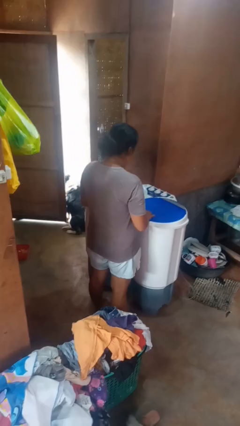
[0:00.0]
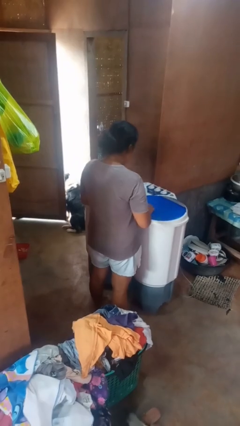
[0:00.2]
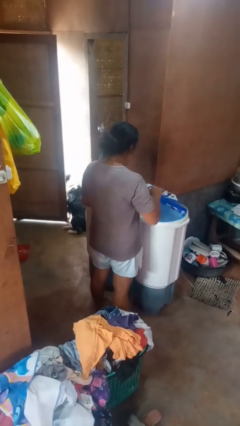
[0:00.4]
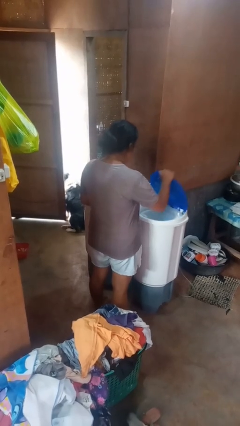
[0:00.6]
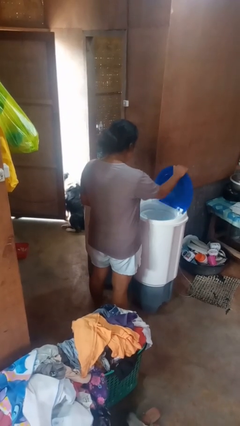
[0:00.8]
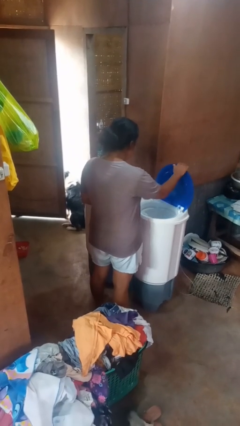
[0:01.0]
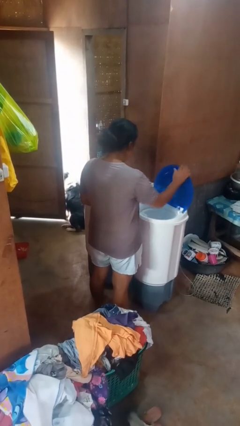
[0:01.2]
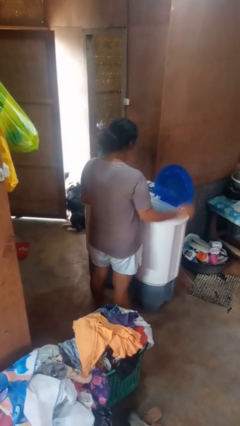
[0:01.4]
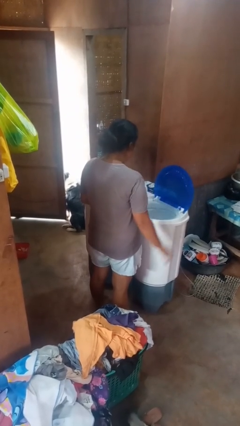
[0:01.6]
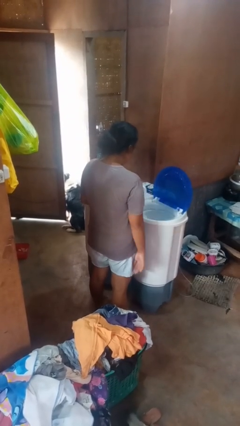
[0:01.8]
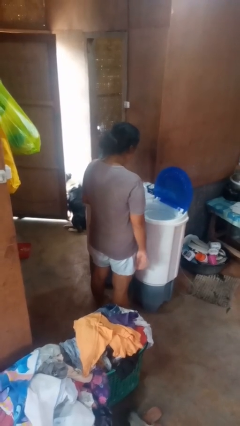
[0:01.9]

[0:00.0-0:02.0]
person opens clothes washer

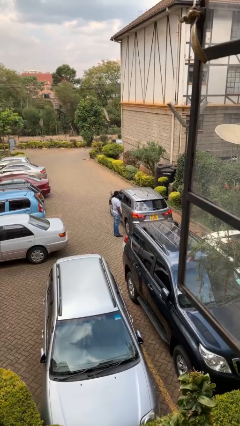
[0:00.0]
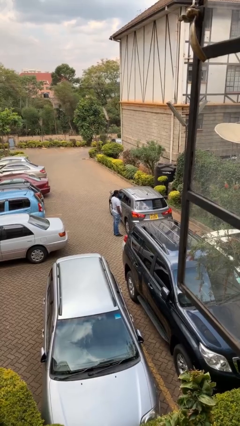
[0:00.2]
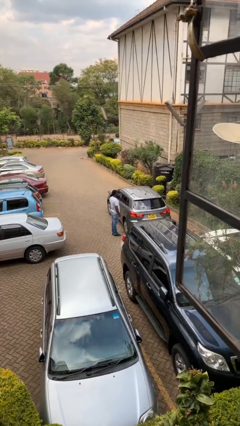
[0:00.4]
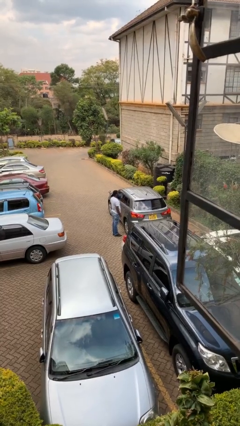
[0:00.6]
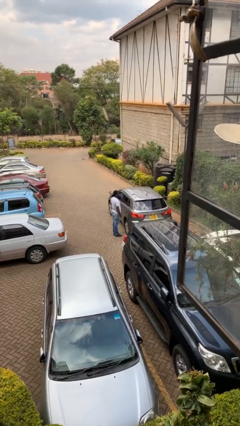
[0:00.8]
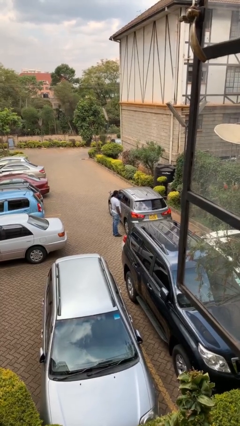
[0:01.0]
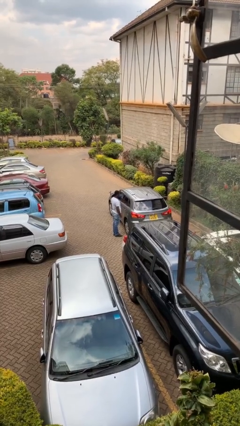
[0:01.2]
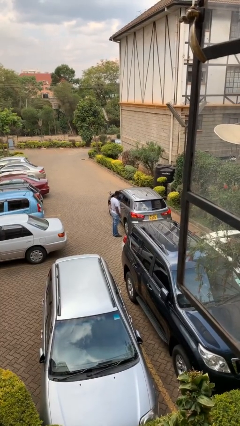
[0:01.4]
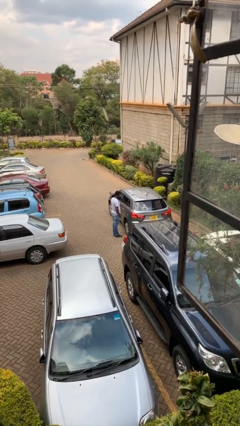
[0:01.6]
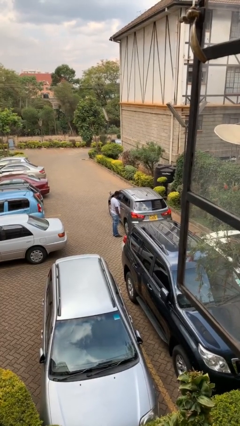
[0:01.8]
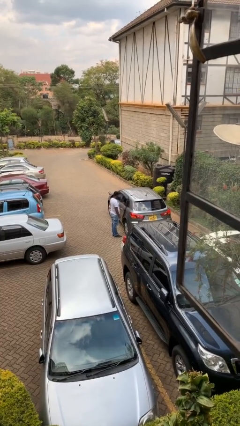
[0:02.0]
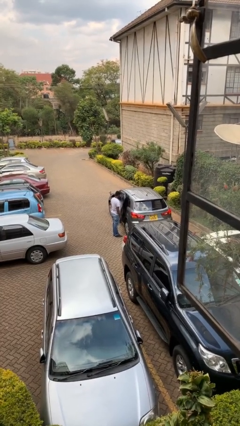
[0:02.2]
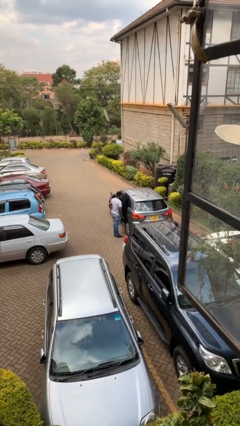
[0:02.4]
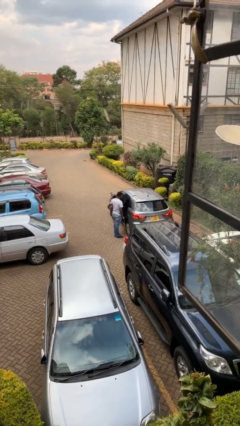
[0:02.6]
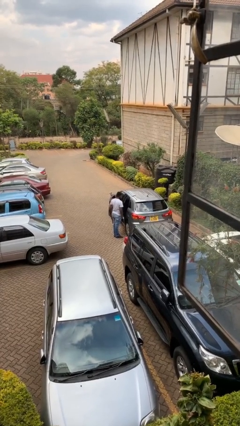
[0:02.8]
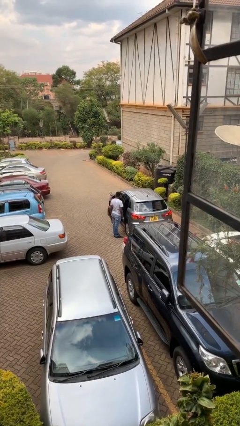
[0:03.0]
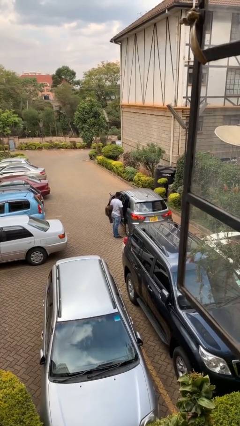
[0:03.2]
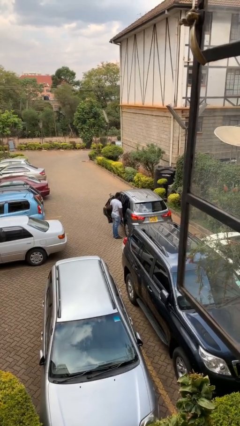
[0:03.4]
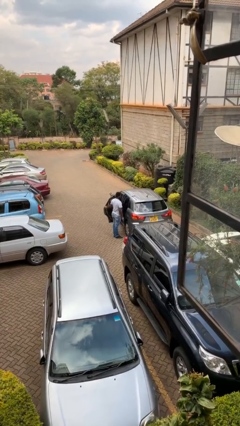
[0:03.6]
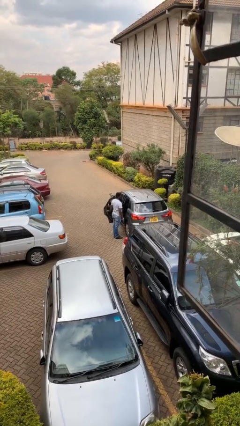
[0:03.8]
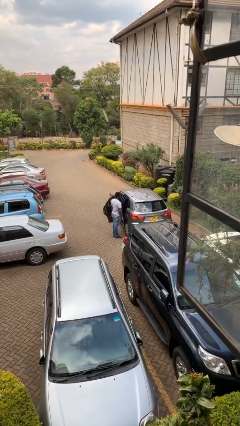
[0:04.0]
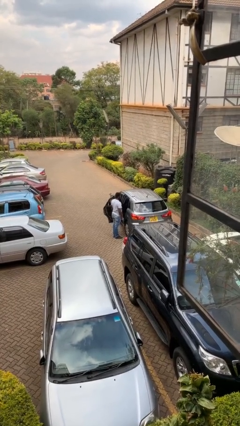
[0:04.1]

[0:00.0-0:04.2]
person opens car door

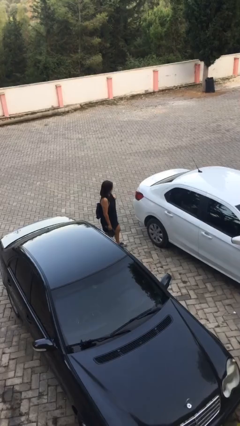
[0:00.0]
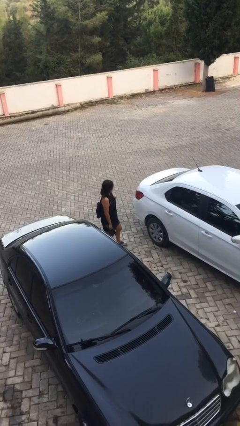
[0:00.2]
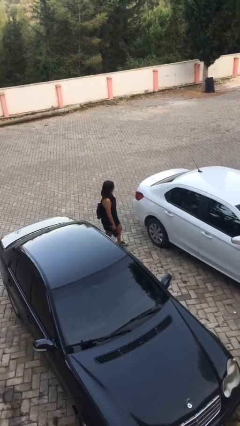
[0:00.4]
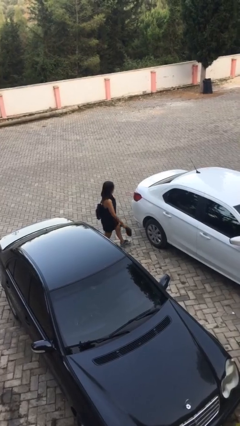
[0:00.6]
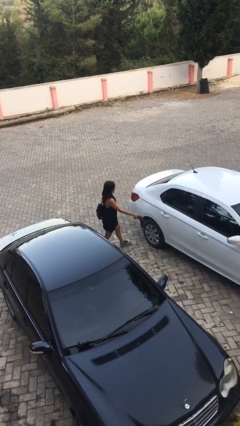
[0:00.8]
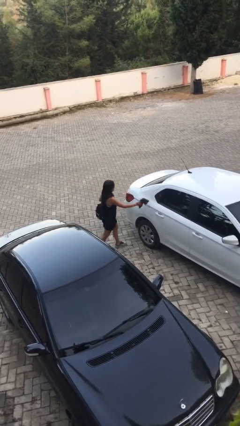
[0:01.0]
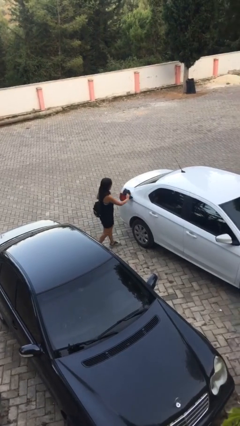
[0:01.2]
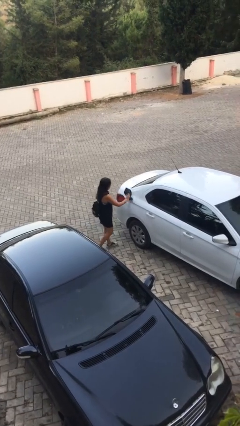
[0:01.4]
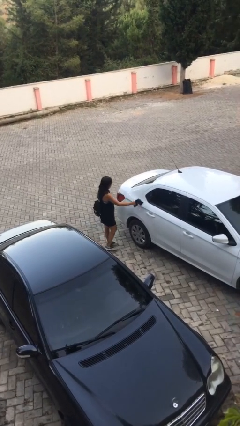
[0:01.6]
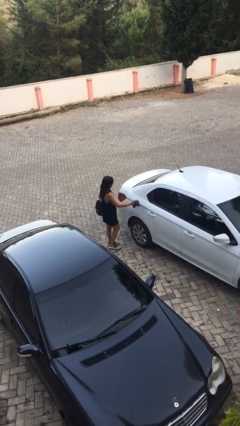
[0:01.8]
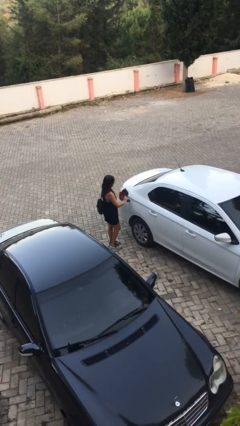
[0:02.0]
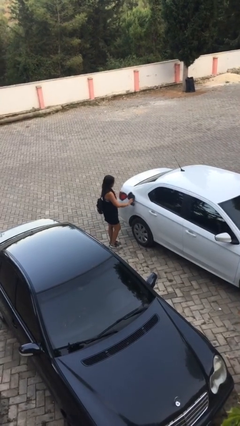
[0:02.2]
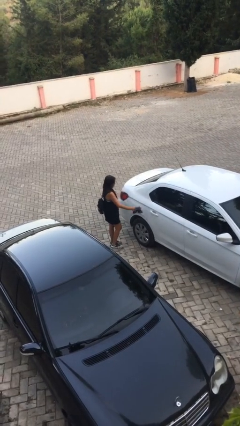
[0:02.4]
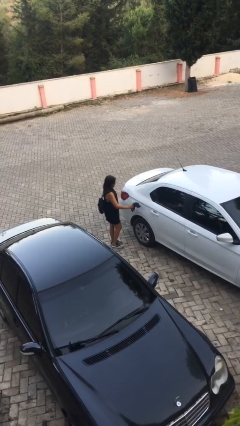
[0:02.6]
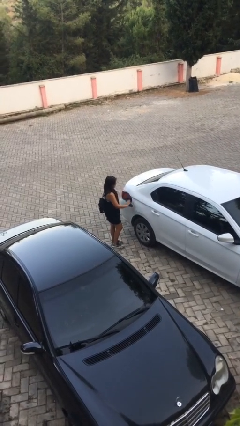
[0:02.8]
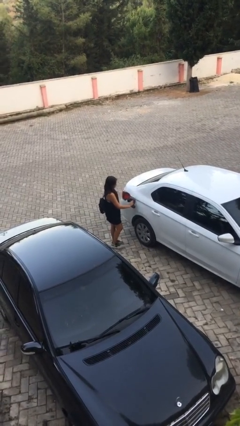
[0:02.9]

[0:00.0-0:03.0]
person polishes car with rag

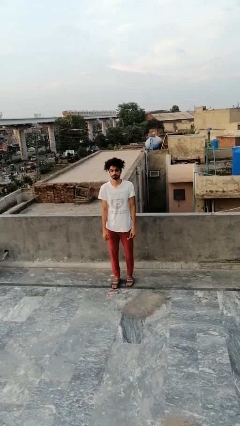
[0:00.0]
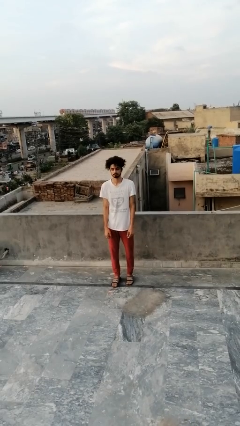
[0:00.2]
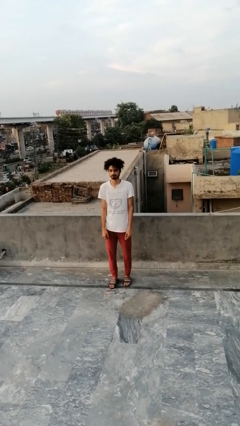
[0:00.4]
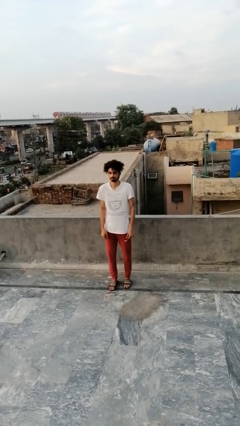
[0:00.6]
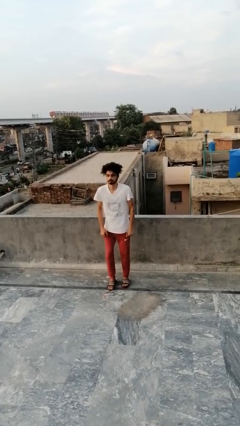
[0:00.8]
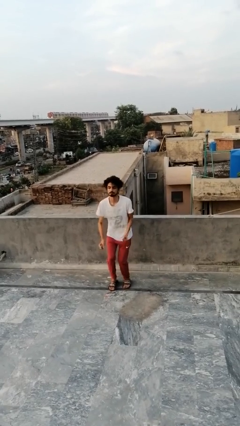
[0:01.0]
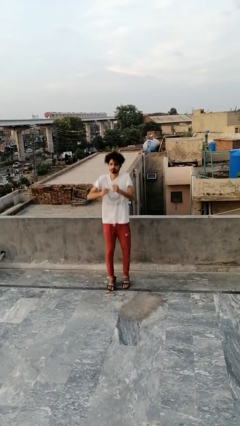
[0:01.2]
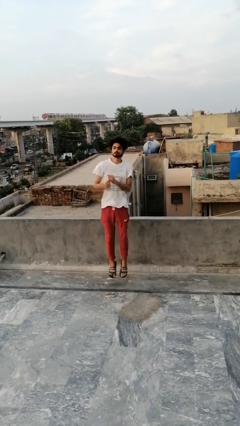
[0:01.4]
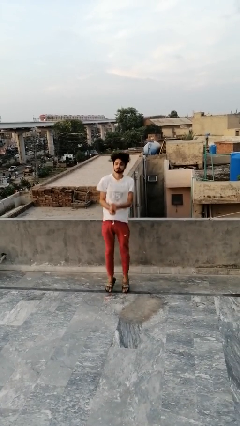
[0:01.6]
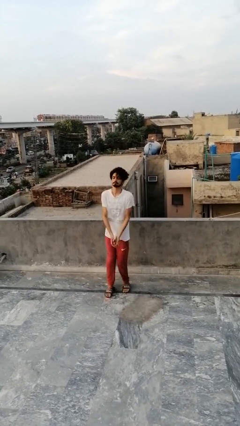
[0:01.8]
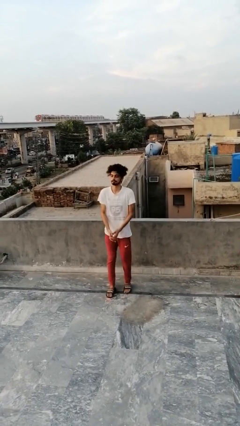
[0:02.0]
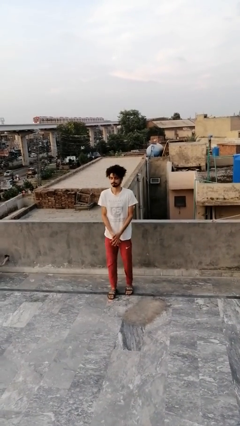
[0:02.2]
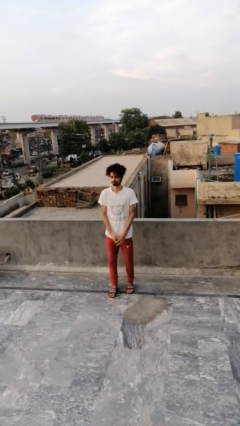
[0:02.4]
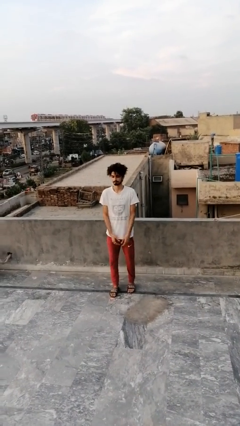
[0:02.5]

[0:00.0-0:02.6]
person jumps

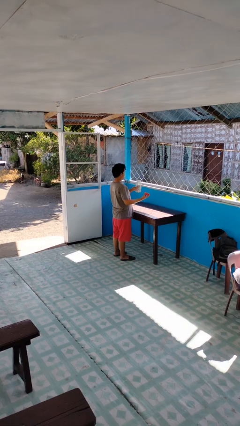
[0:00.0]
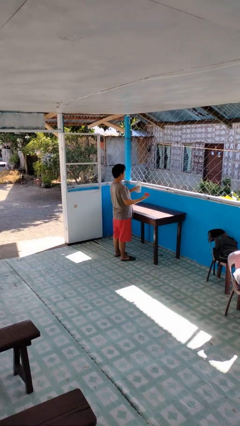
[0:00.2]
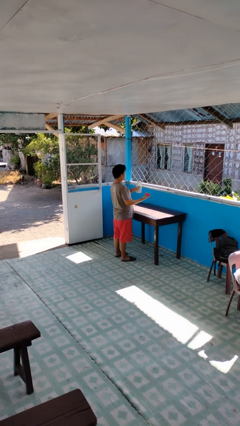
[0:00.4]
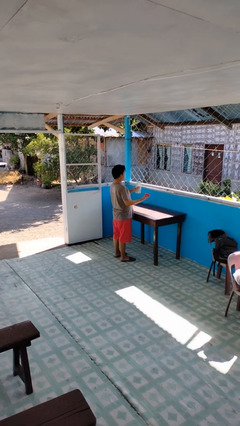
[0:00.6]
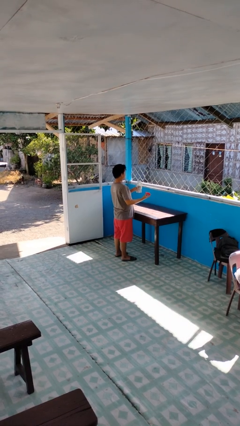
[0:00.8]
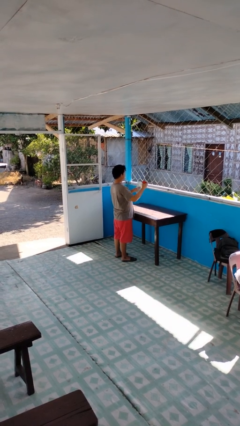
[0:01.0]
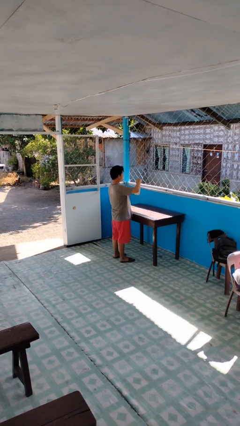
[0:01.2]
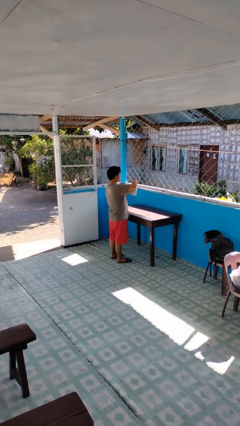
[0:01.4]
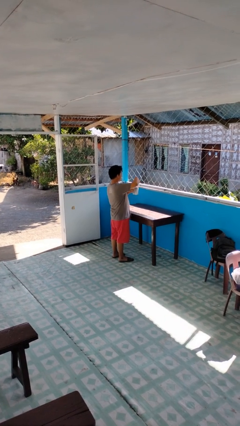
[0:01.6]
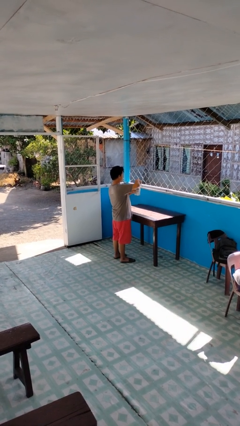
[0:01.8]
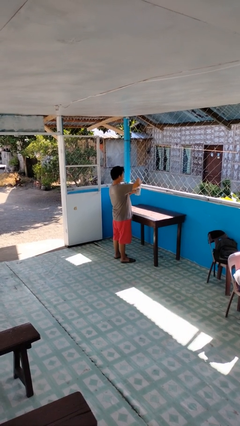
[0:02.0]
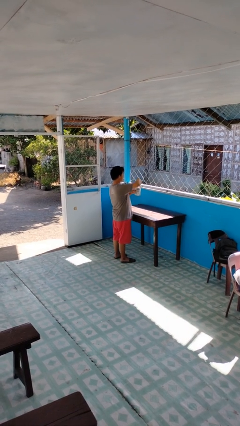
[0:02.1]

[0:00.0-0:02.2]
person closes jar

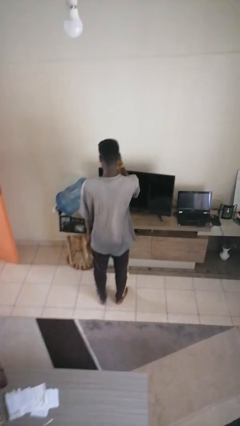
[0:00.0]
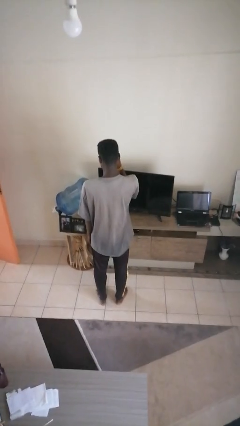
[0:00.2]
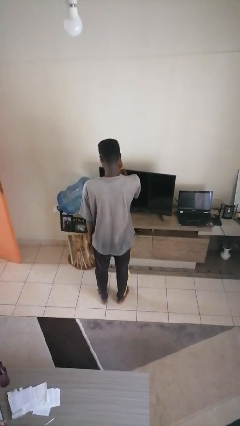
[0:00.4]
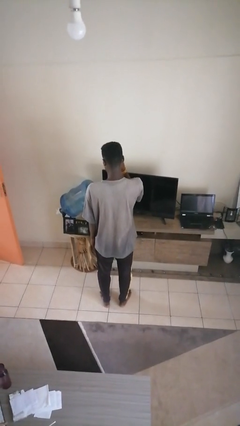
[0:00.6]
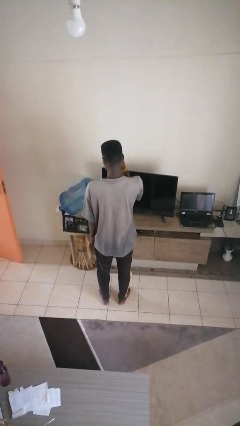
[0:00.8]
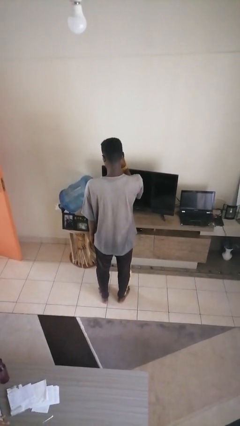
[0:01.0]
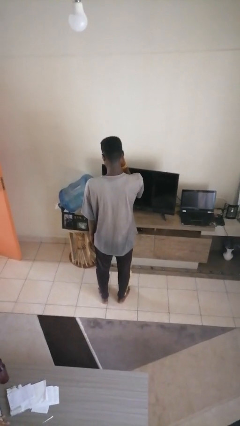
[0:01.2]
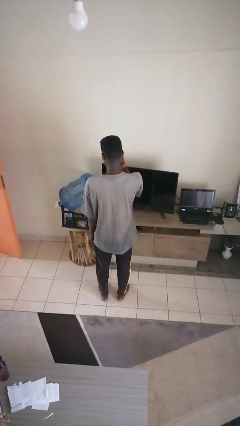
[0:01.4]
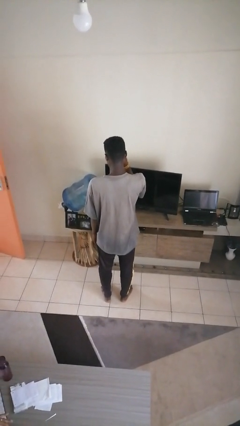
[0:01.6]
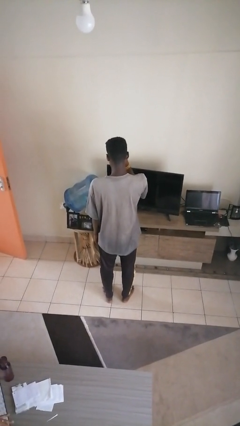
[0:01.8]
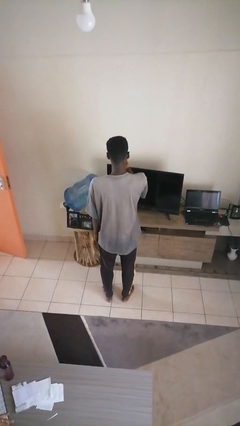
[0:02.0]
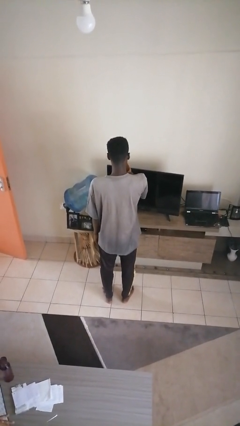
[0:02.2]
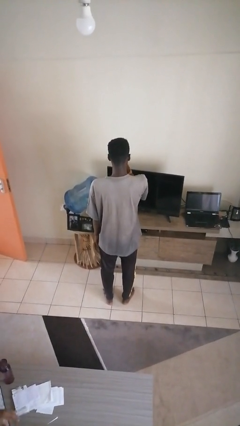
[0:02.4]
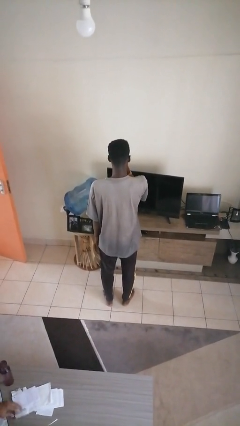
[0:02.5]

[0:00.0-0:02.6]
person scratches face

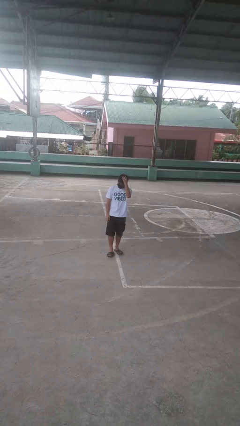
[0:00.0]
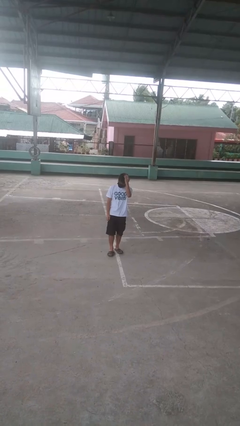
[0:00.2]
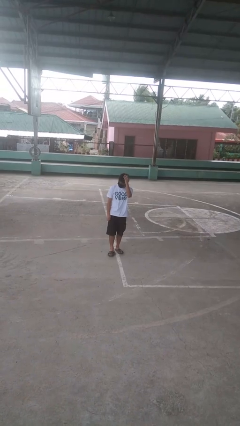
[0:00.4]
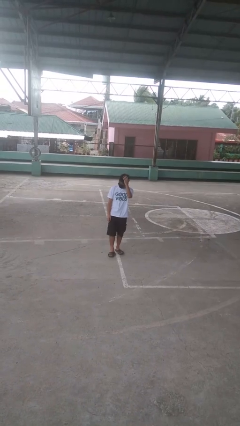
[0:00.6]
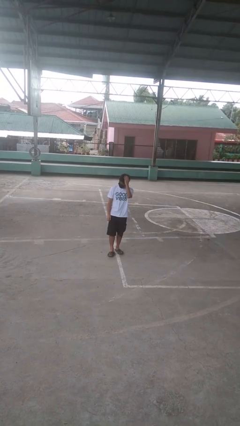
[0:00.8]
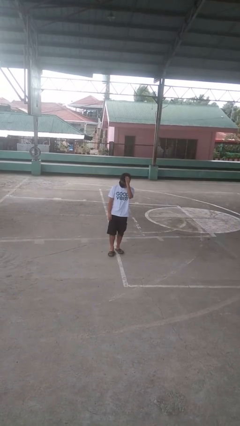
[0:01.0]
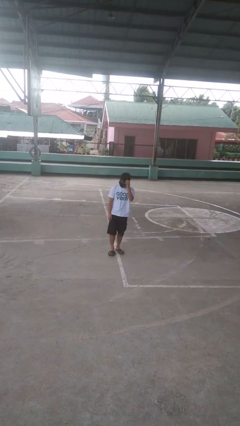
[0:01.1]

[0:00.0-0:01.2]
person pats head
